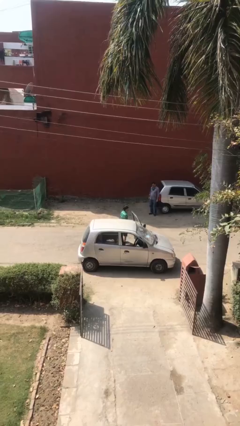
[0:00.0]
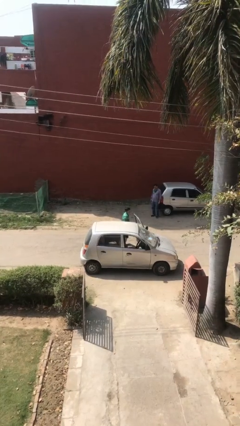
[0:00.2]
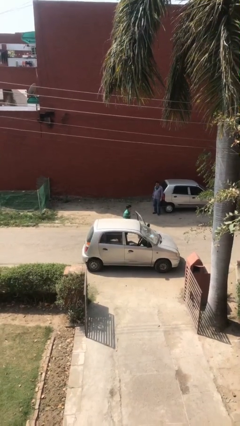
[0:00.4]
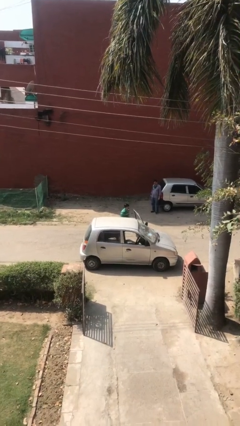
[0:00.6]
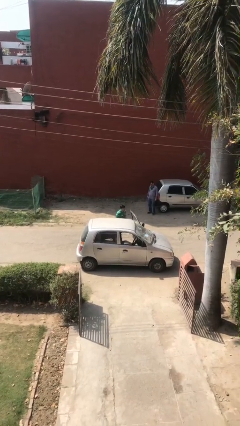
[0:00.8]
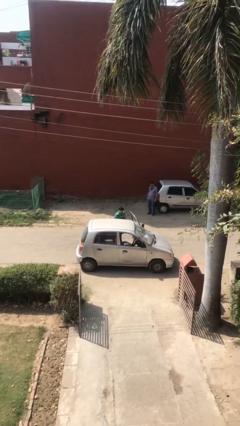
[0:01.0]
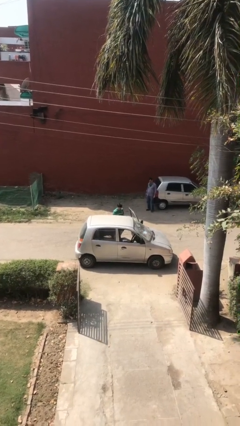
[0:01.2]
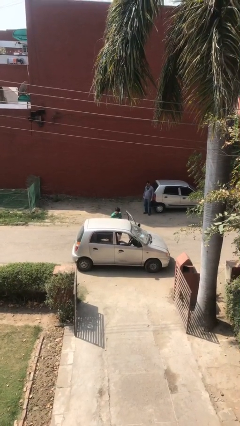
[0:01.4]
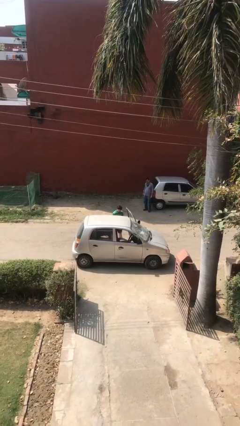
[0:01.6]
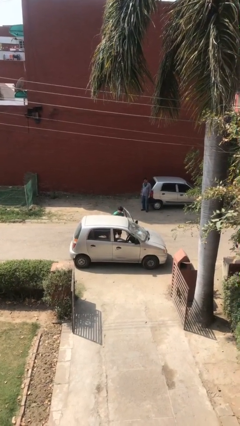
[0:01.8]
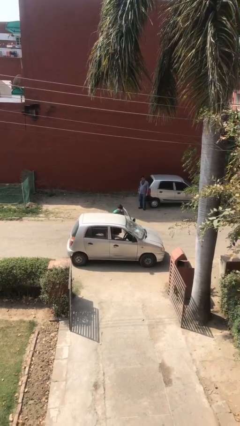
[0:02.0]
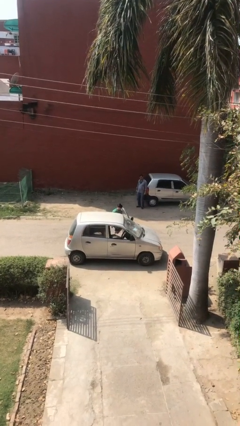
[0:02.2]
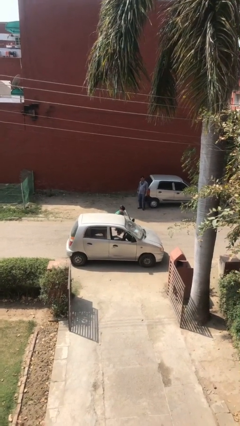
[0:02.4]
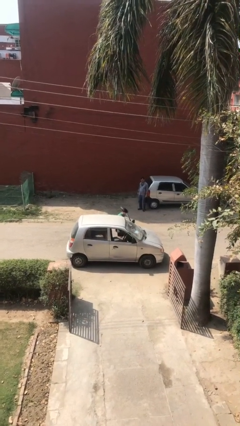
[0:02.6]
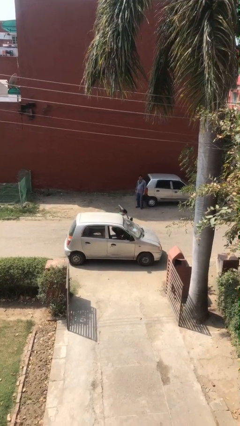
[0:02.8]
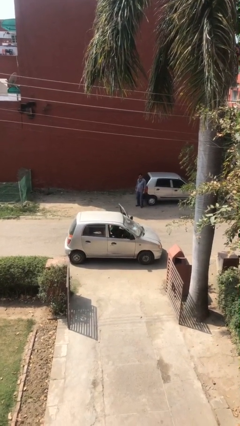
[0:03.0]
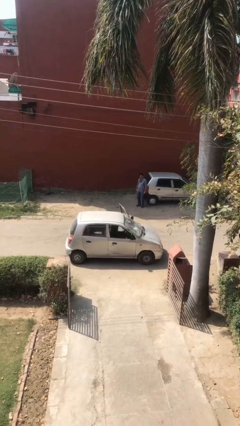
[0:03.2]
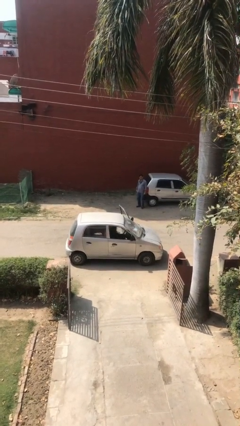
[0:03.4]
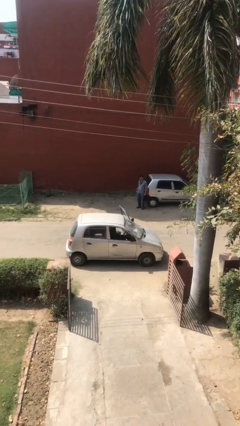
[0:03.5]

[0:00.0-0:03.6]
person enters car

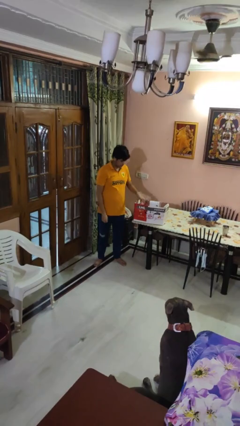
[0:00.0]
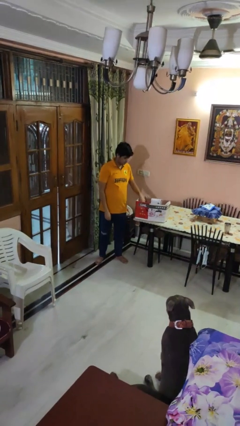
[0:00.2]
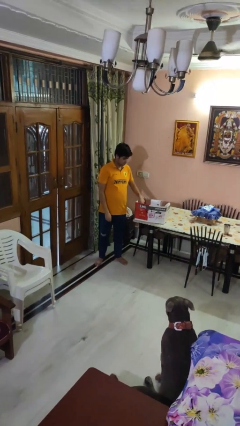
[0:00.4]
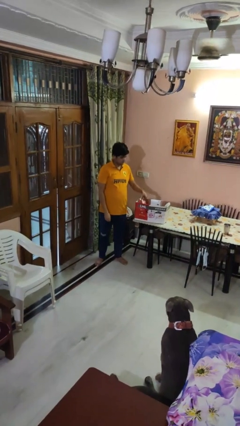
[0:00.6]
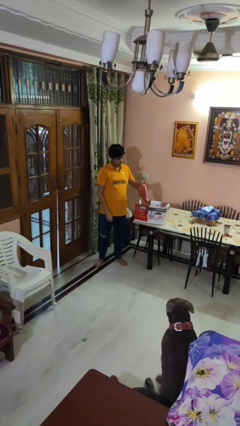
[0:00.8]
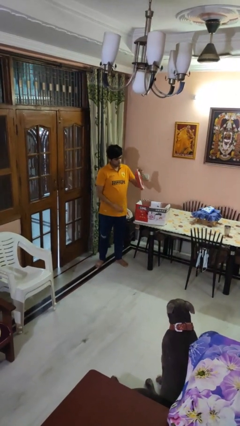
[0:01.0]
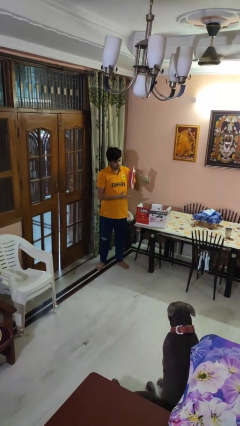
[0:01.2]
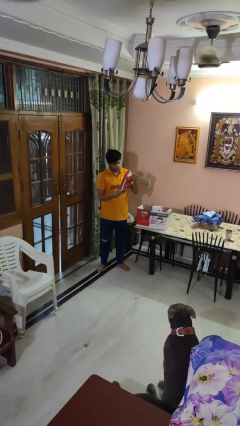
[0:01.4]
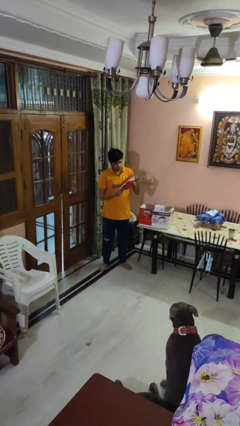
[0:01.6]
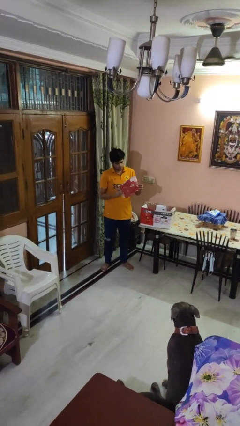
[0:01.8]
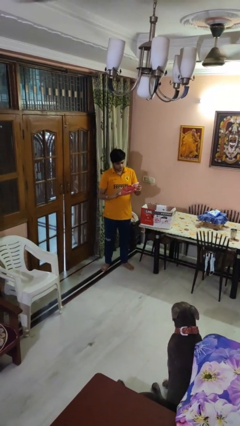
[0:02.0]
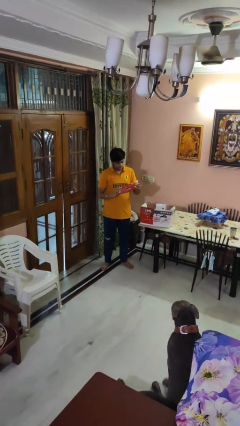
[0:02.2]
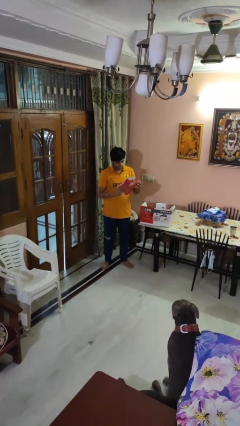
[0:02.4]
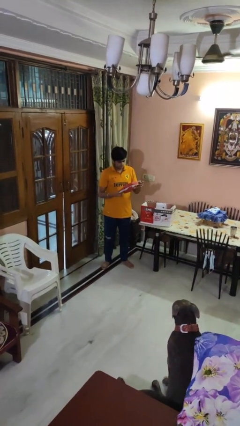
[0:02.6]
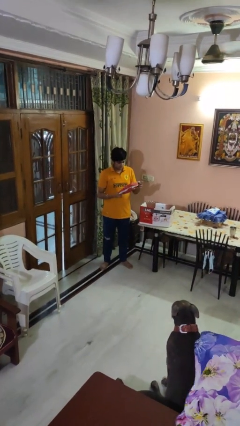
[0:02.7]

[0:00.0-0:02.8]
person takes object from box

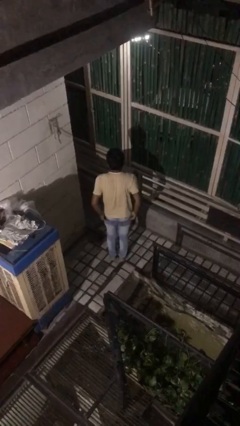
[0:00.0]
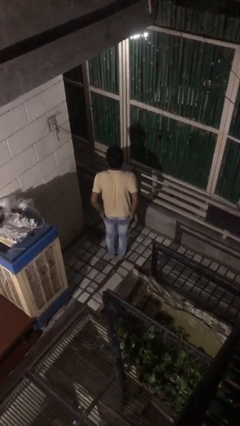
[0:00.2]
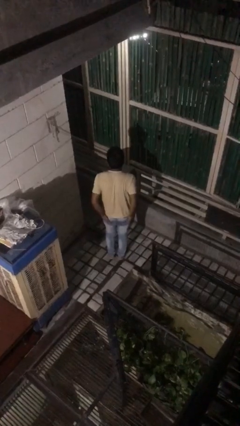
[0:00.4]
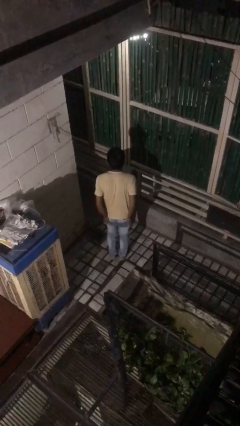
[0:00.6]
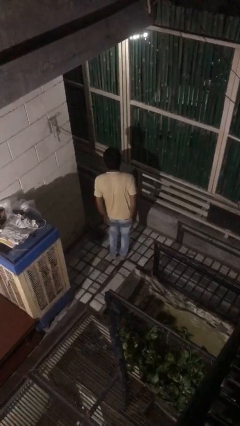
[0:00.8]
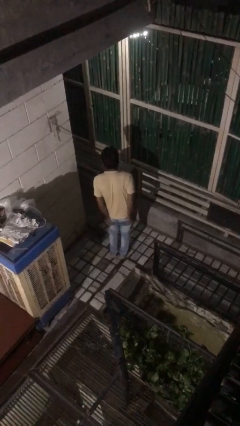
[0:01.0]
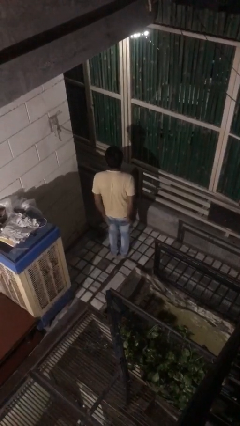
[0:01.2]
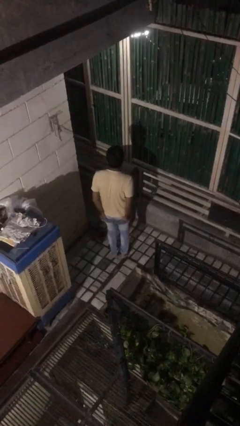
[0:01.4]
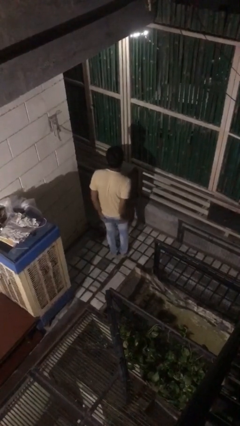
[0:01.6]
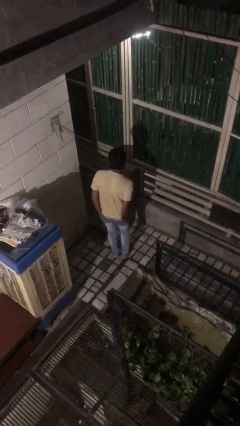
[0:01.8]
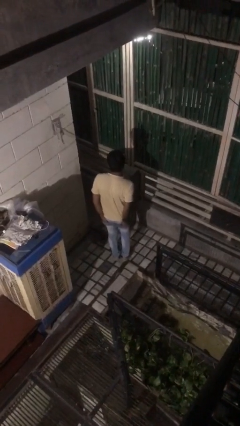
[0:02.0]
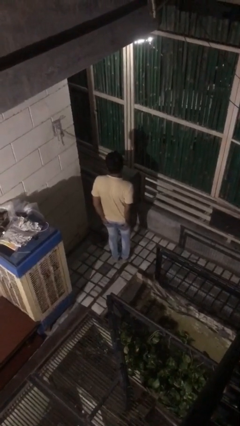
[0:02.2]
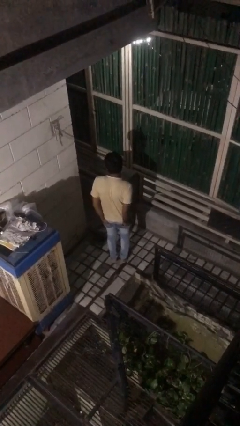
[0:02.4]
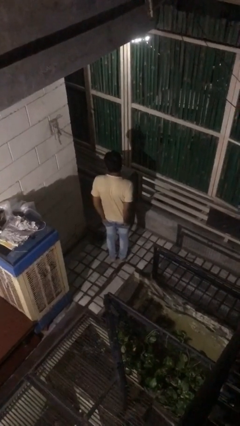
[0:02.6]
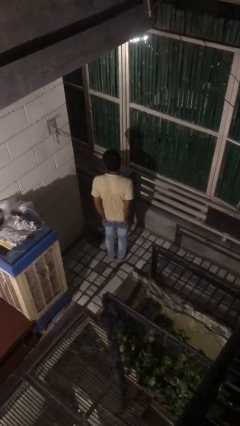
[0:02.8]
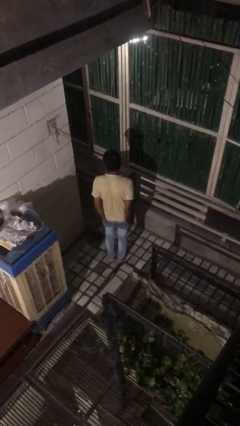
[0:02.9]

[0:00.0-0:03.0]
person puts hands in back pockets

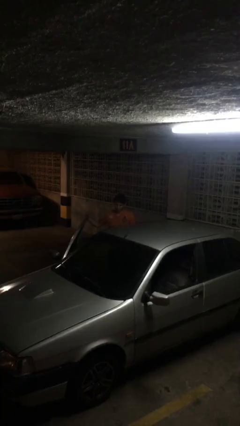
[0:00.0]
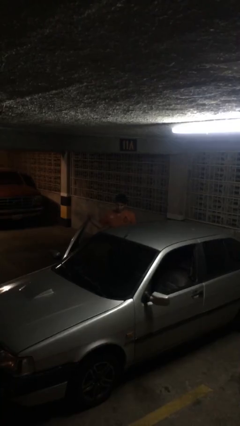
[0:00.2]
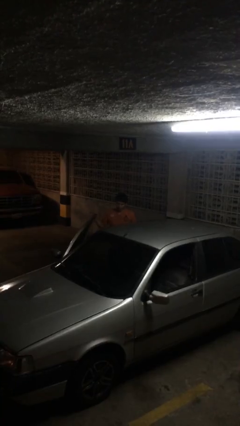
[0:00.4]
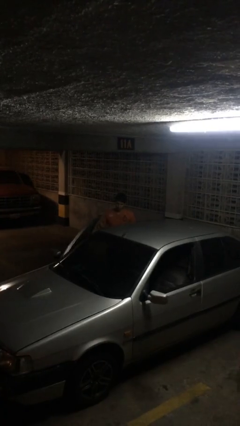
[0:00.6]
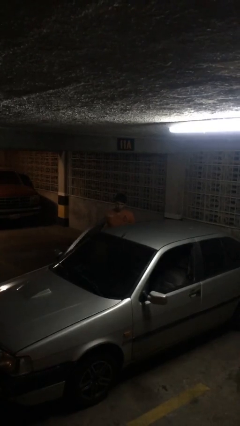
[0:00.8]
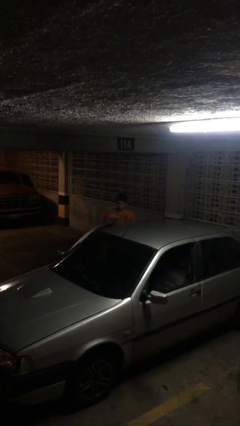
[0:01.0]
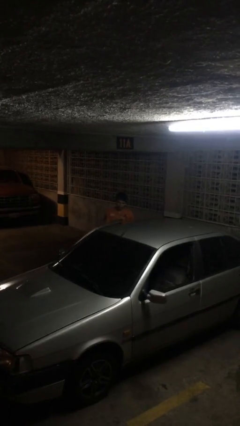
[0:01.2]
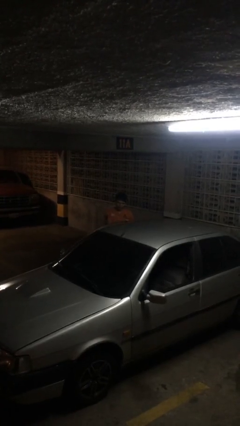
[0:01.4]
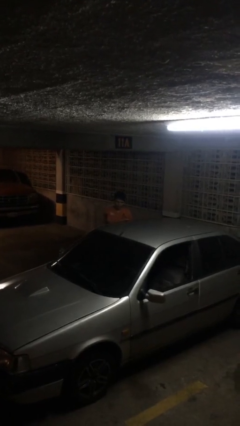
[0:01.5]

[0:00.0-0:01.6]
person closes car door

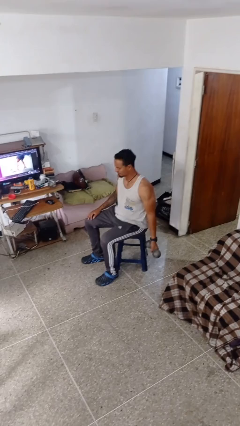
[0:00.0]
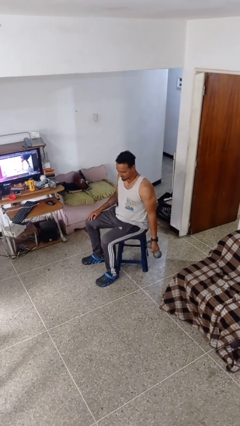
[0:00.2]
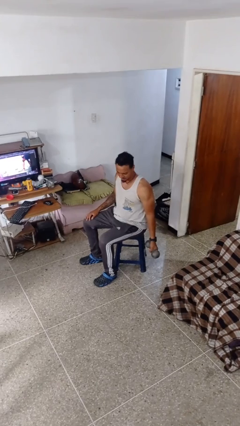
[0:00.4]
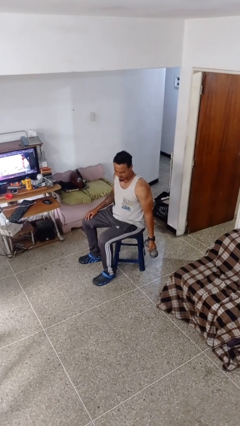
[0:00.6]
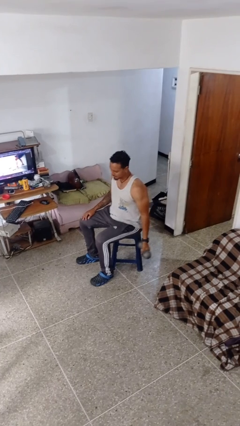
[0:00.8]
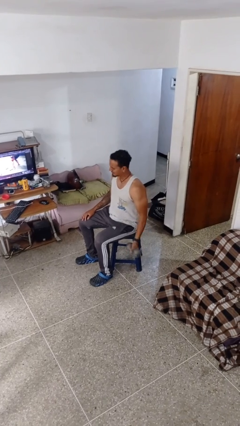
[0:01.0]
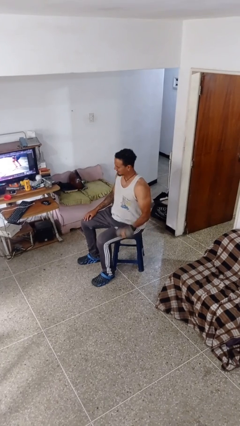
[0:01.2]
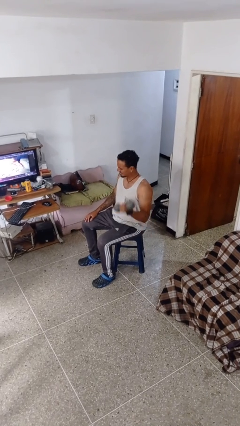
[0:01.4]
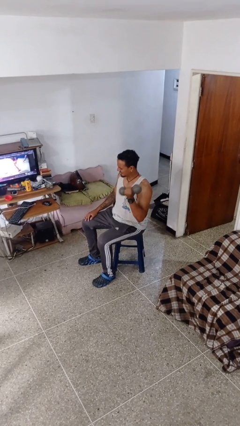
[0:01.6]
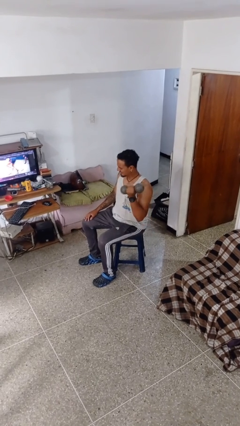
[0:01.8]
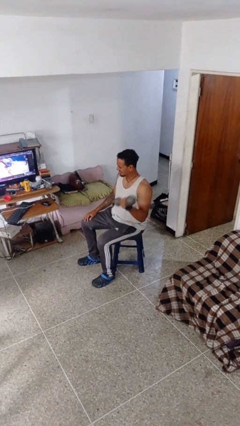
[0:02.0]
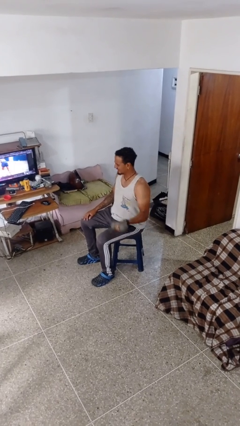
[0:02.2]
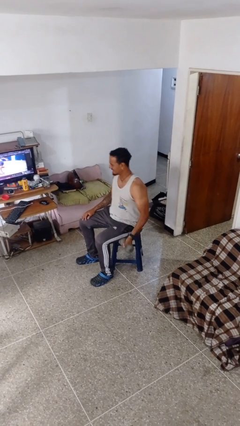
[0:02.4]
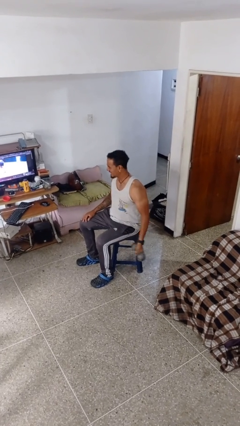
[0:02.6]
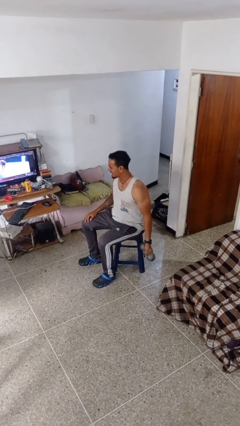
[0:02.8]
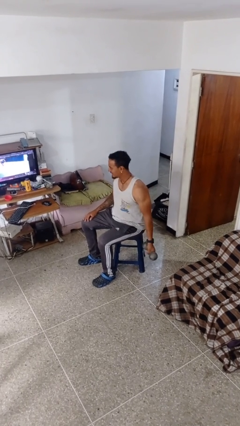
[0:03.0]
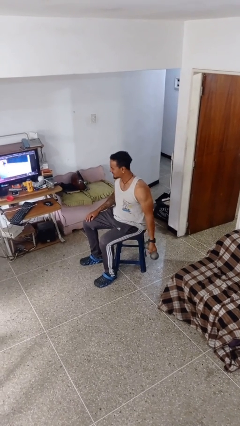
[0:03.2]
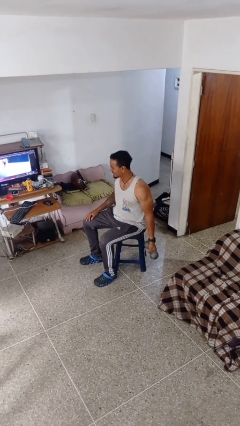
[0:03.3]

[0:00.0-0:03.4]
person lifts dumbbells

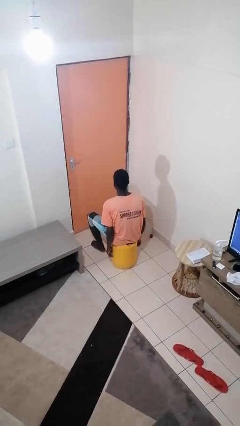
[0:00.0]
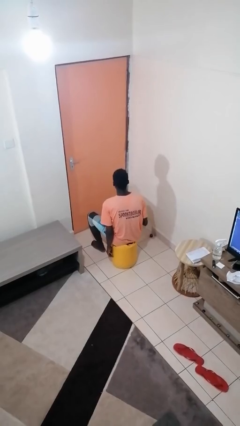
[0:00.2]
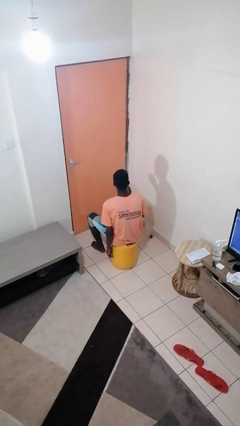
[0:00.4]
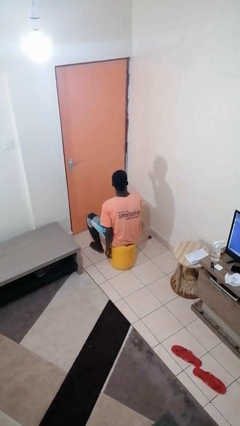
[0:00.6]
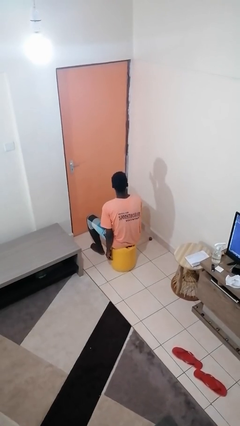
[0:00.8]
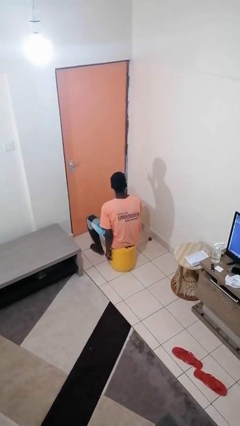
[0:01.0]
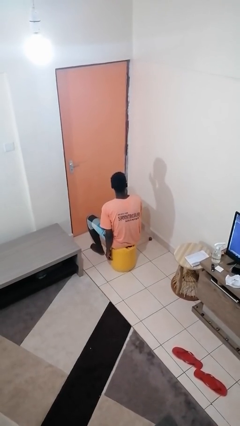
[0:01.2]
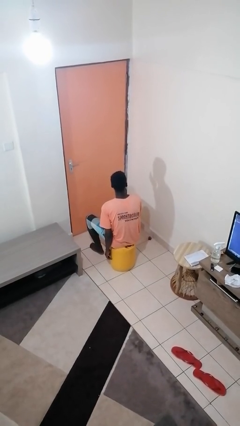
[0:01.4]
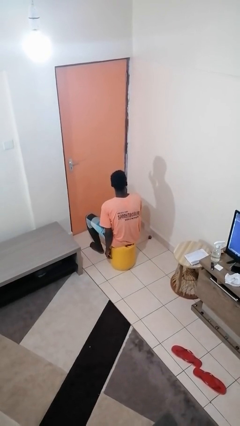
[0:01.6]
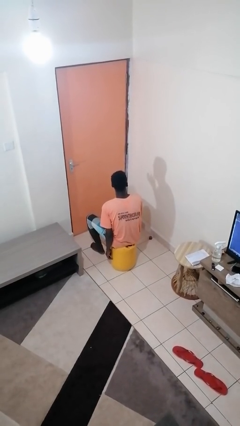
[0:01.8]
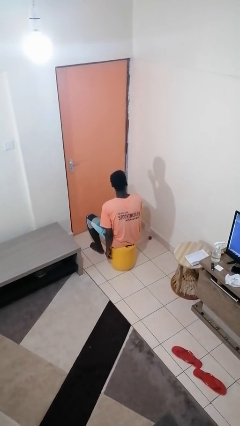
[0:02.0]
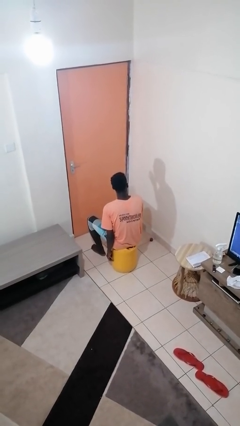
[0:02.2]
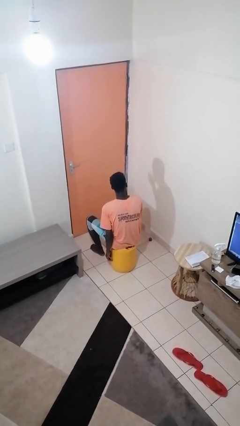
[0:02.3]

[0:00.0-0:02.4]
person licks fingers

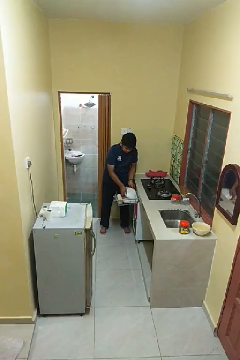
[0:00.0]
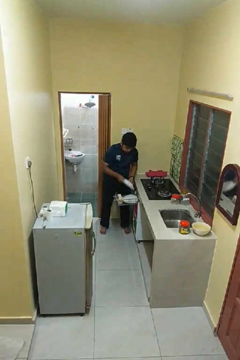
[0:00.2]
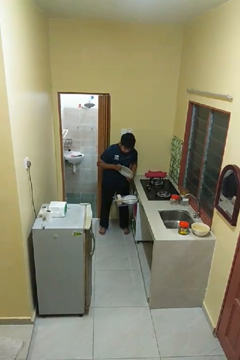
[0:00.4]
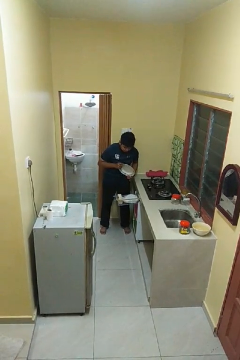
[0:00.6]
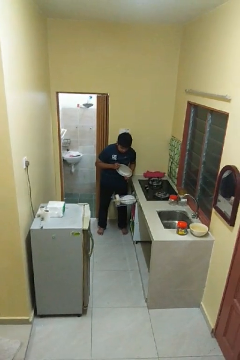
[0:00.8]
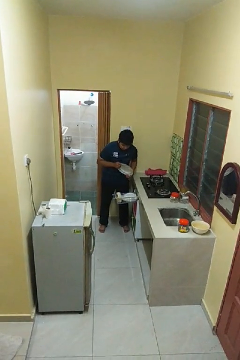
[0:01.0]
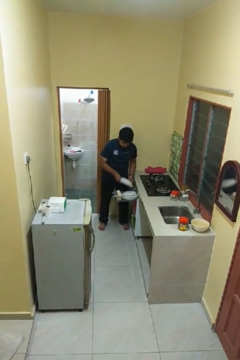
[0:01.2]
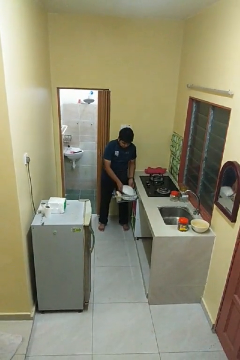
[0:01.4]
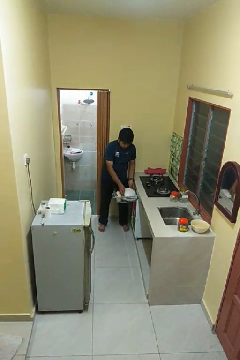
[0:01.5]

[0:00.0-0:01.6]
person puts object into kitchen drawer
